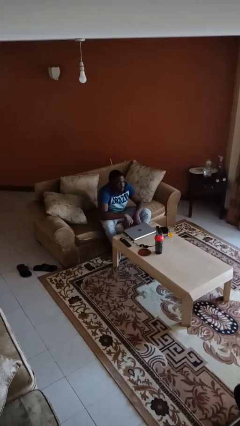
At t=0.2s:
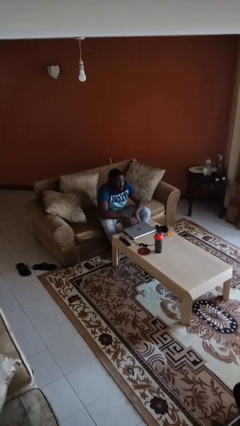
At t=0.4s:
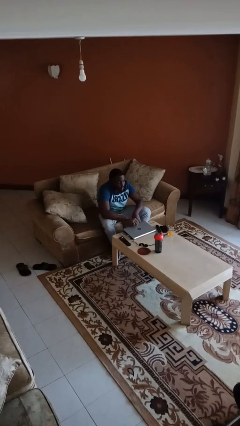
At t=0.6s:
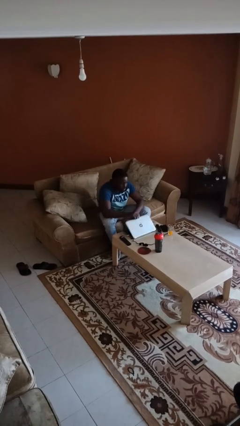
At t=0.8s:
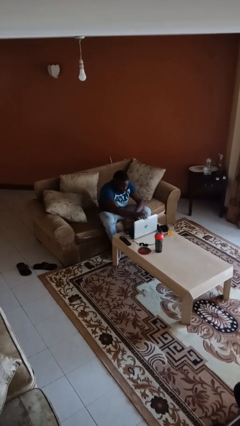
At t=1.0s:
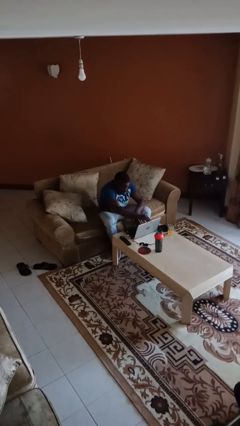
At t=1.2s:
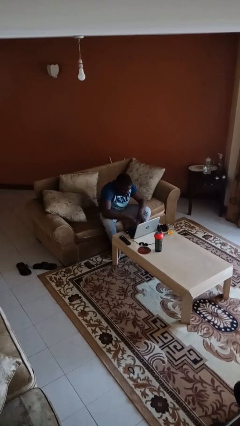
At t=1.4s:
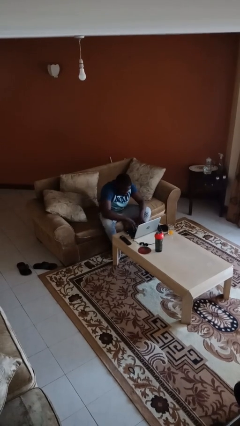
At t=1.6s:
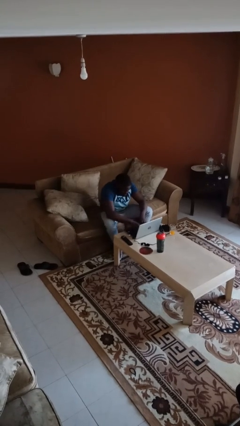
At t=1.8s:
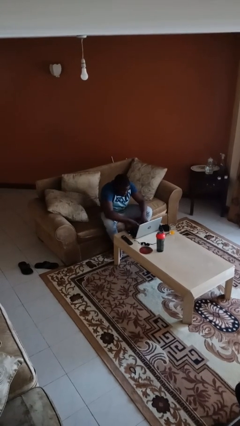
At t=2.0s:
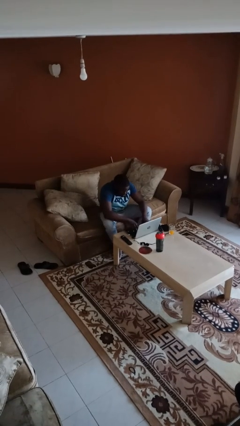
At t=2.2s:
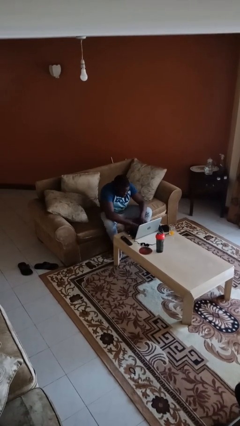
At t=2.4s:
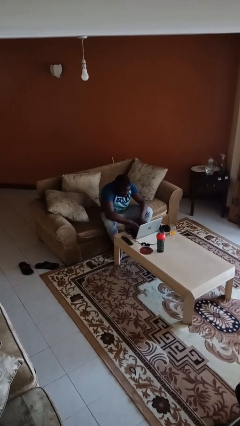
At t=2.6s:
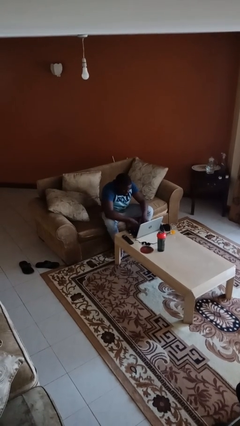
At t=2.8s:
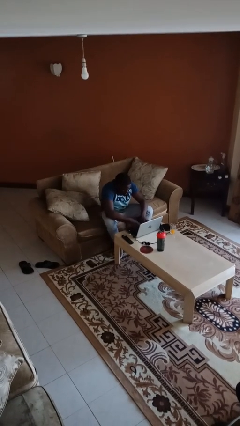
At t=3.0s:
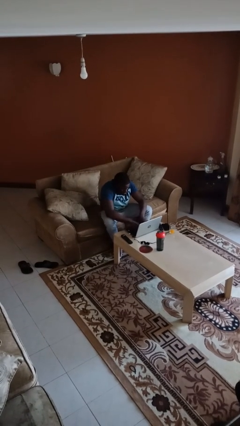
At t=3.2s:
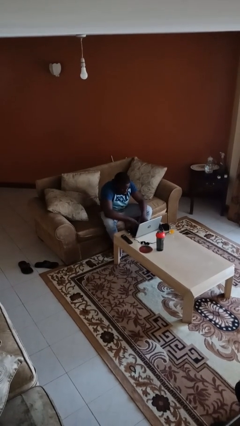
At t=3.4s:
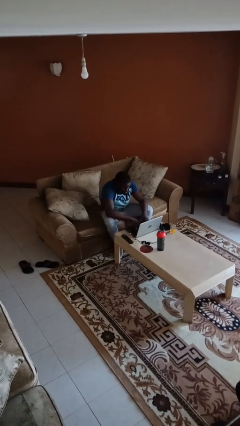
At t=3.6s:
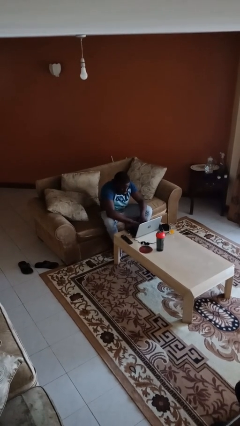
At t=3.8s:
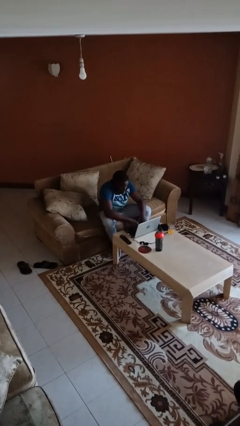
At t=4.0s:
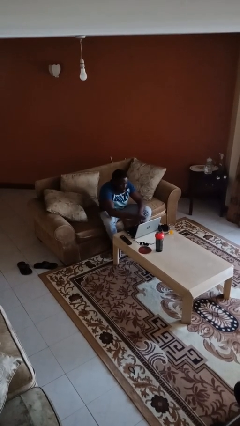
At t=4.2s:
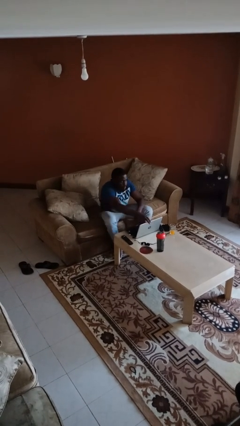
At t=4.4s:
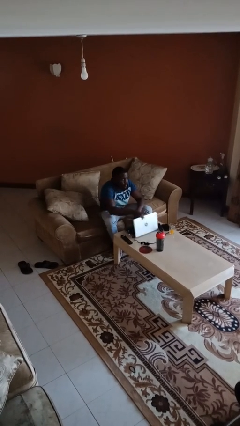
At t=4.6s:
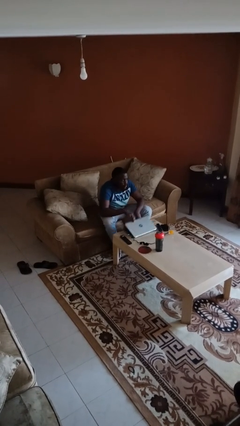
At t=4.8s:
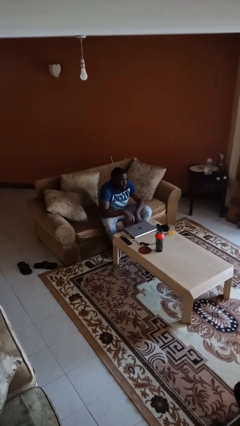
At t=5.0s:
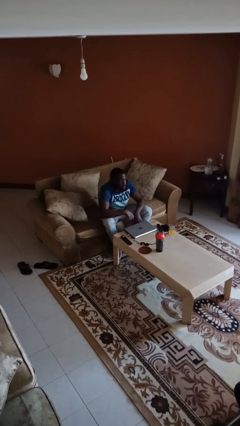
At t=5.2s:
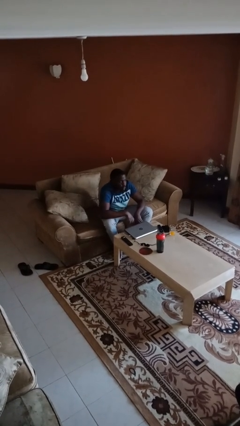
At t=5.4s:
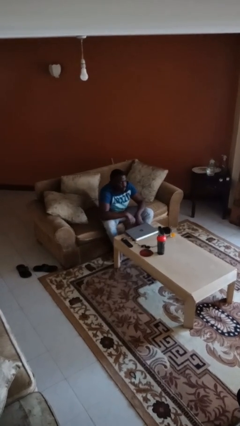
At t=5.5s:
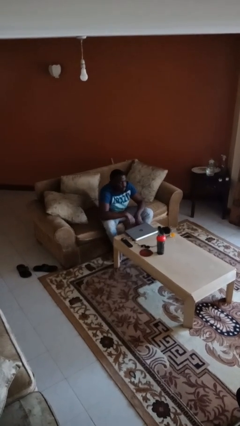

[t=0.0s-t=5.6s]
person interacts with laptop

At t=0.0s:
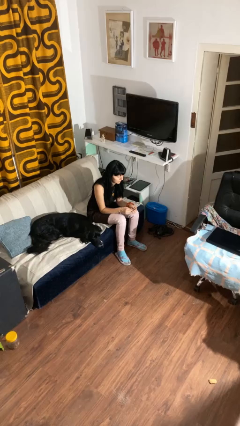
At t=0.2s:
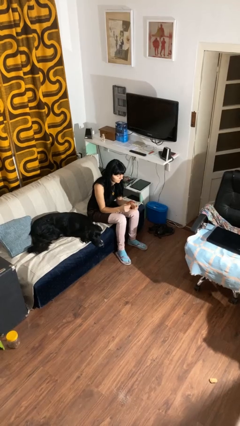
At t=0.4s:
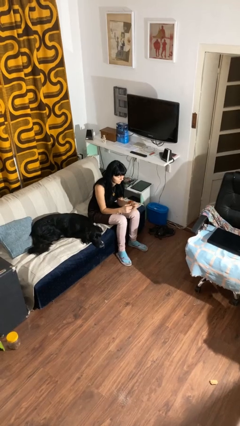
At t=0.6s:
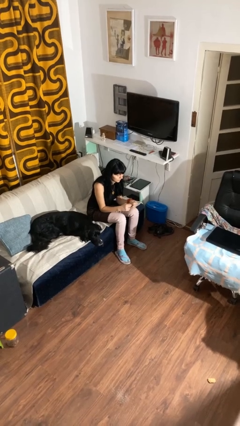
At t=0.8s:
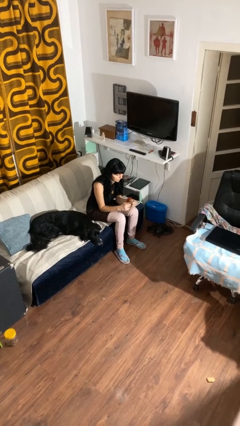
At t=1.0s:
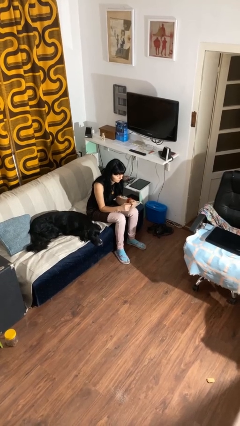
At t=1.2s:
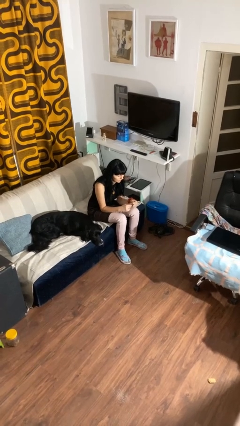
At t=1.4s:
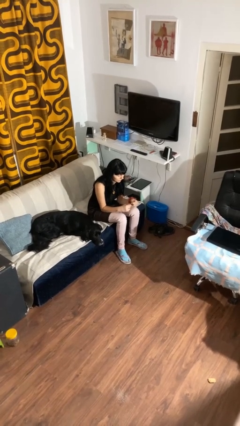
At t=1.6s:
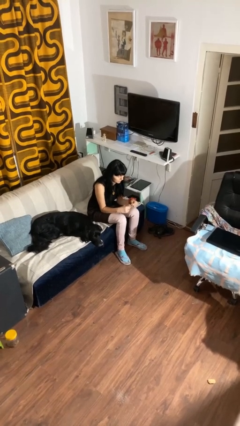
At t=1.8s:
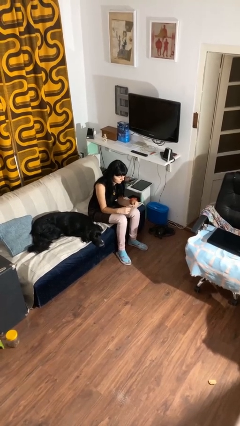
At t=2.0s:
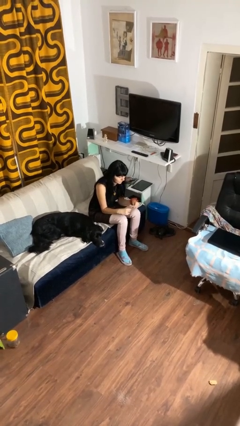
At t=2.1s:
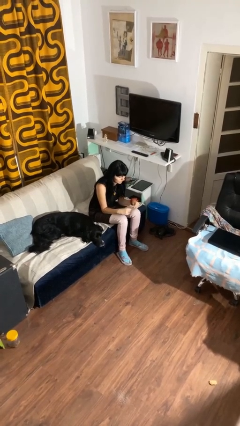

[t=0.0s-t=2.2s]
person clips fingernails

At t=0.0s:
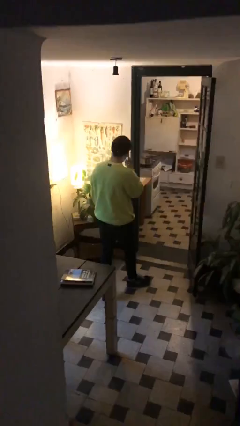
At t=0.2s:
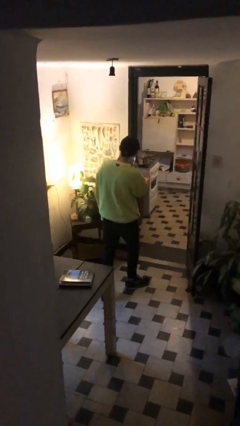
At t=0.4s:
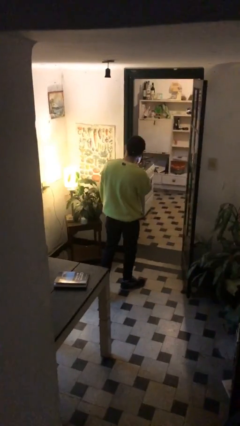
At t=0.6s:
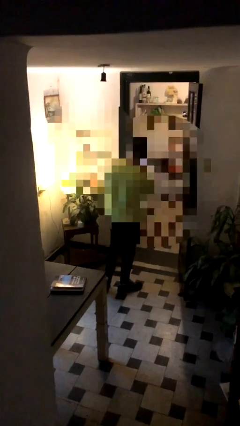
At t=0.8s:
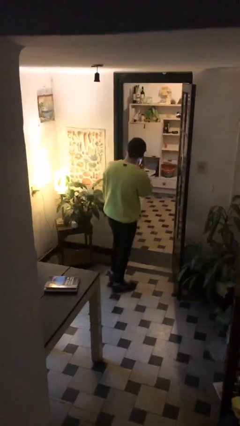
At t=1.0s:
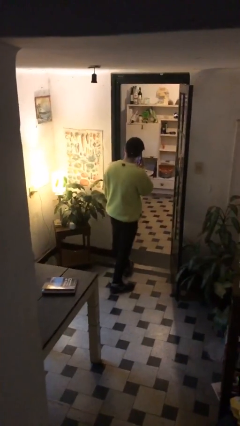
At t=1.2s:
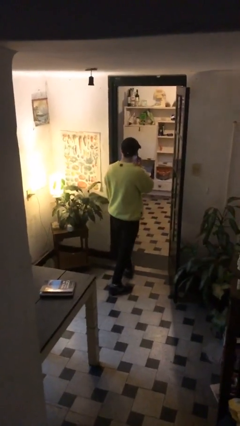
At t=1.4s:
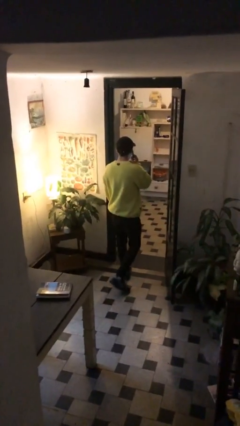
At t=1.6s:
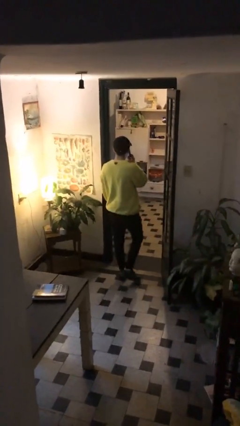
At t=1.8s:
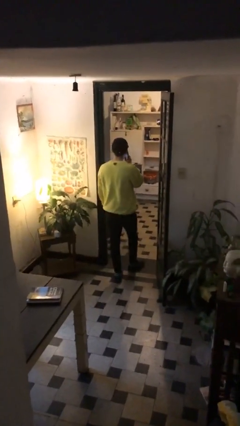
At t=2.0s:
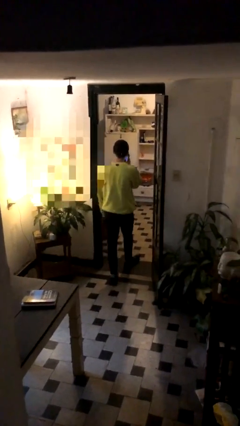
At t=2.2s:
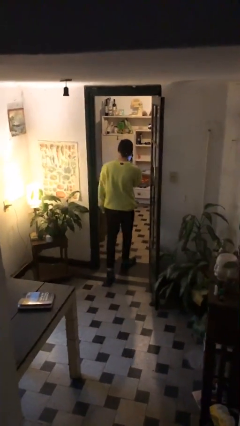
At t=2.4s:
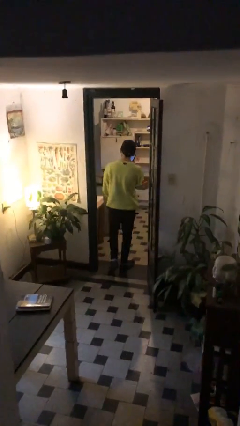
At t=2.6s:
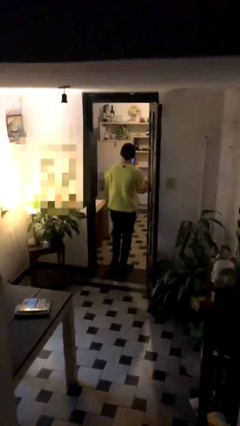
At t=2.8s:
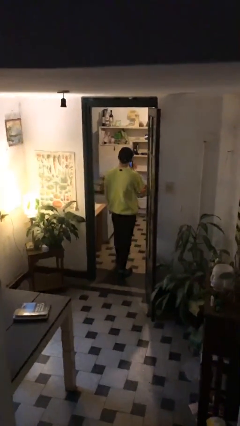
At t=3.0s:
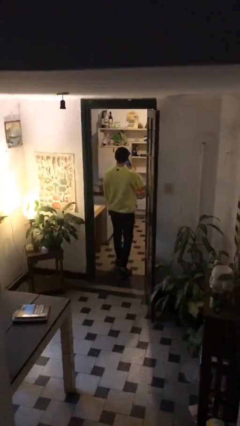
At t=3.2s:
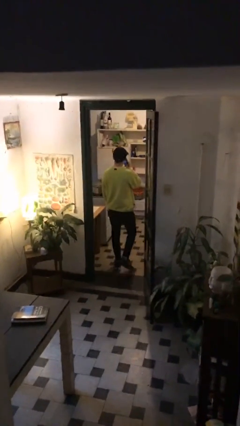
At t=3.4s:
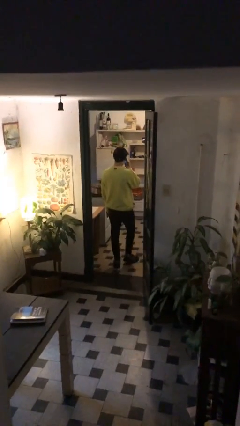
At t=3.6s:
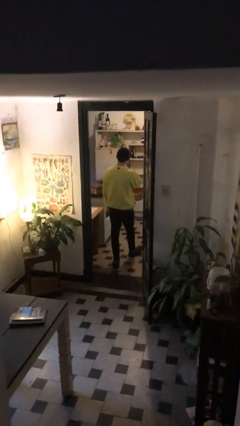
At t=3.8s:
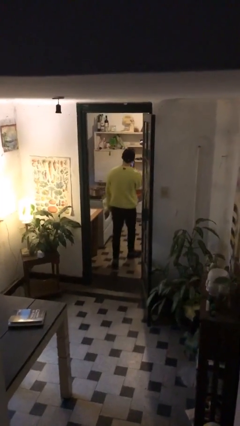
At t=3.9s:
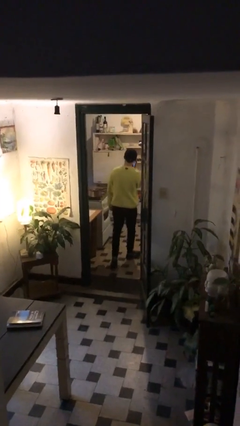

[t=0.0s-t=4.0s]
person exits scene through structure

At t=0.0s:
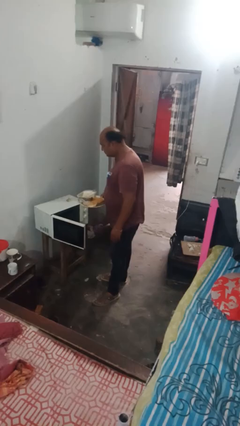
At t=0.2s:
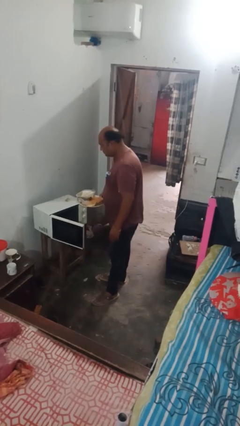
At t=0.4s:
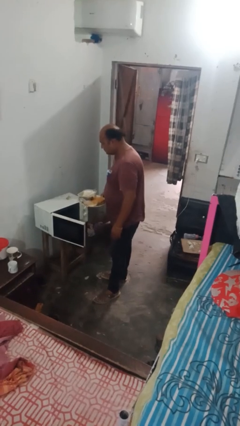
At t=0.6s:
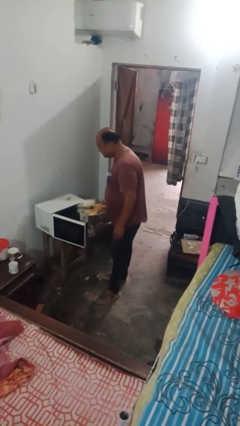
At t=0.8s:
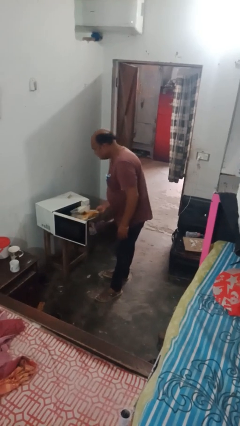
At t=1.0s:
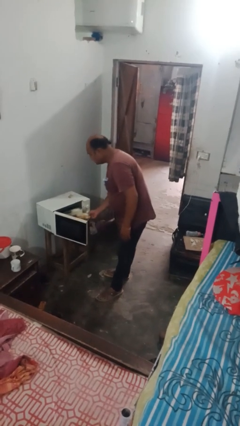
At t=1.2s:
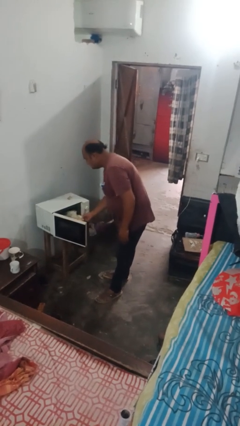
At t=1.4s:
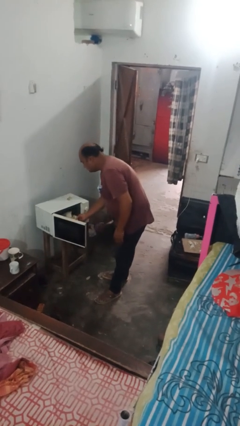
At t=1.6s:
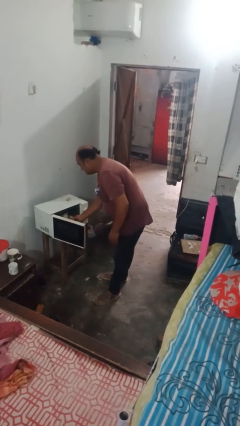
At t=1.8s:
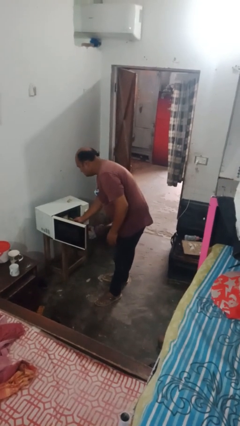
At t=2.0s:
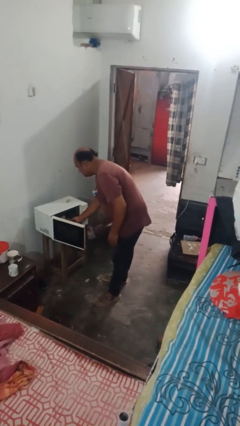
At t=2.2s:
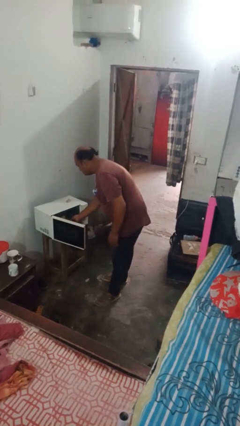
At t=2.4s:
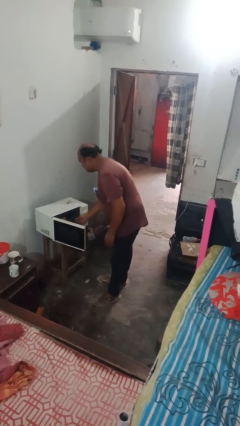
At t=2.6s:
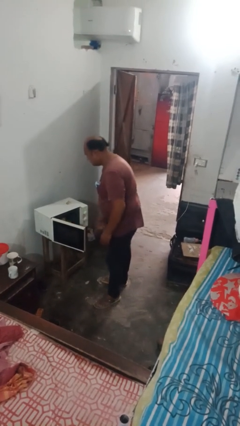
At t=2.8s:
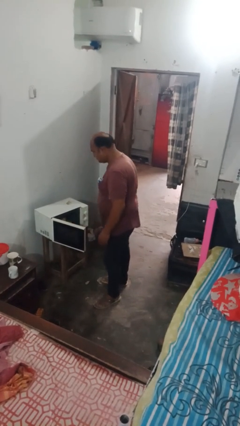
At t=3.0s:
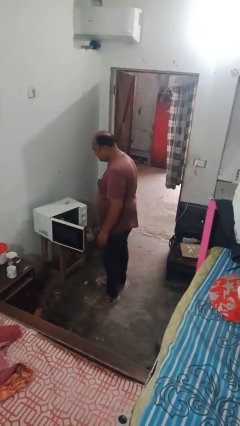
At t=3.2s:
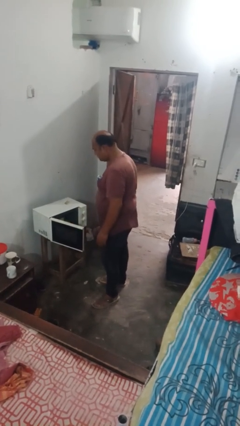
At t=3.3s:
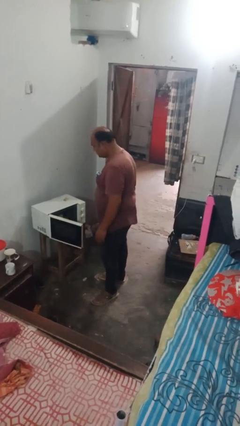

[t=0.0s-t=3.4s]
person puts object into microwave

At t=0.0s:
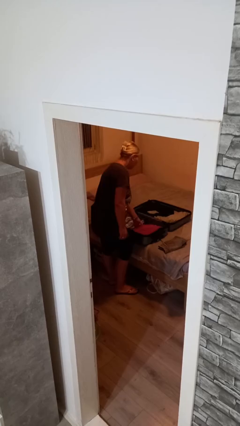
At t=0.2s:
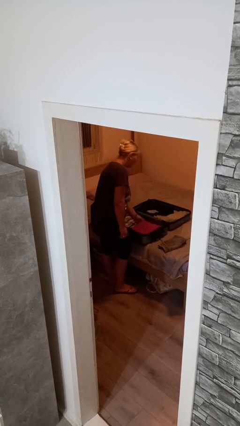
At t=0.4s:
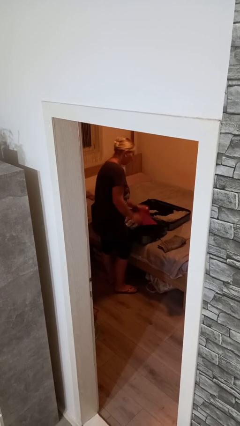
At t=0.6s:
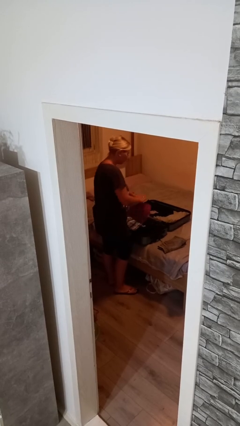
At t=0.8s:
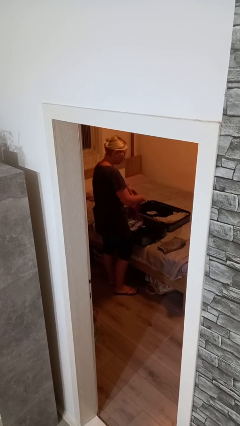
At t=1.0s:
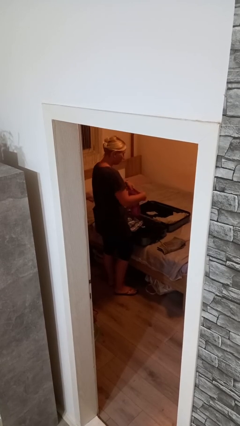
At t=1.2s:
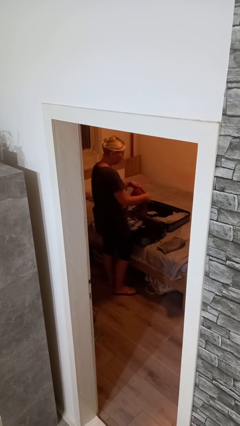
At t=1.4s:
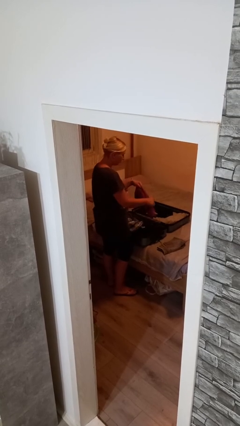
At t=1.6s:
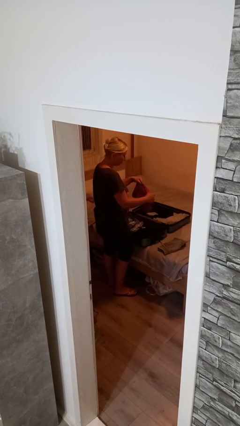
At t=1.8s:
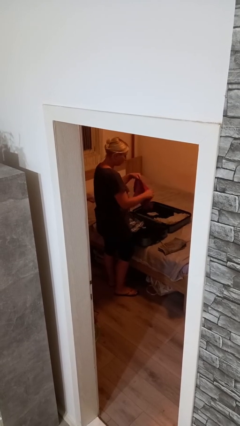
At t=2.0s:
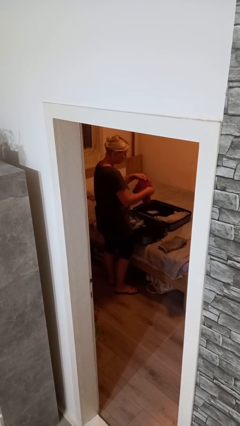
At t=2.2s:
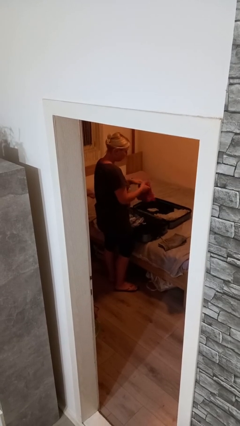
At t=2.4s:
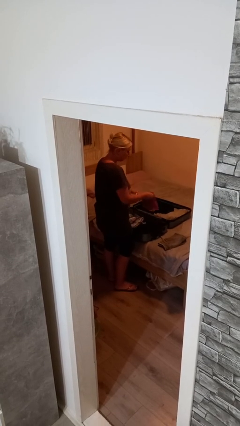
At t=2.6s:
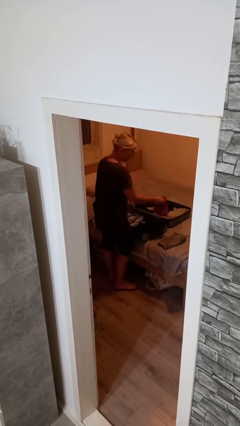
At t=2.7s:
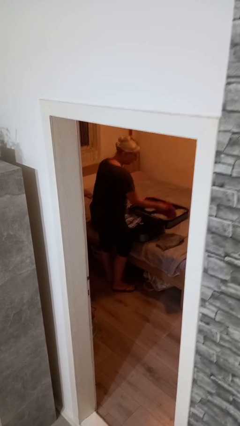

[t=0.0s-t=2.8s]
person unloads clothes from suitcase
